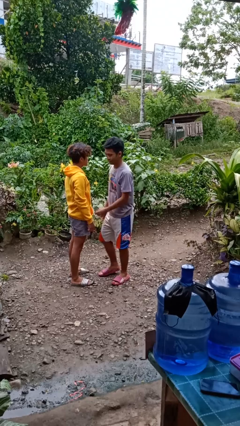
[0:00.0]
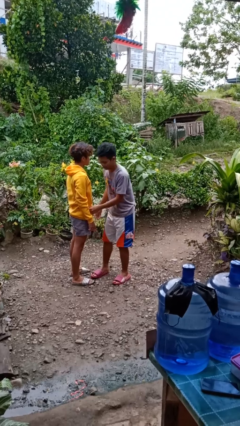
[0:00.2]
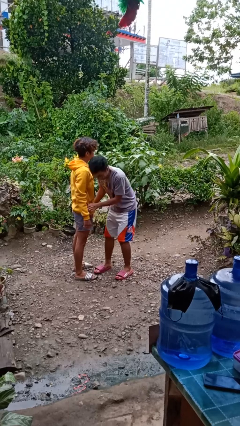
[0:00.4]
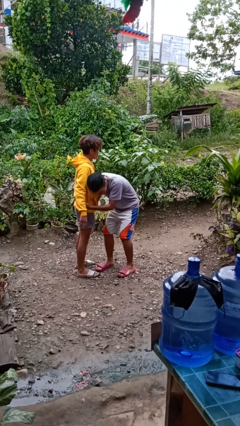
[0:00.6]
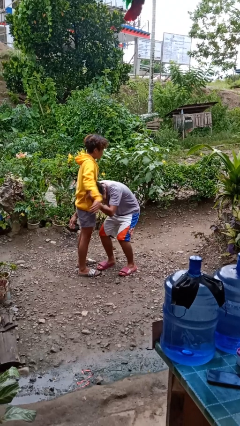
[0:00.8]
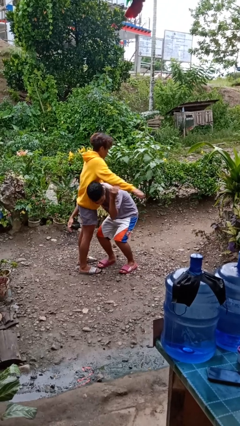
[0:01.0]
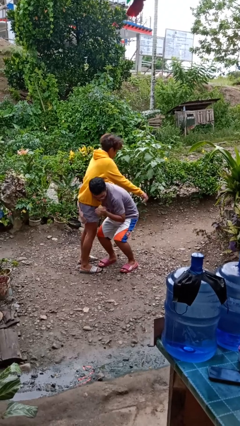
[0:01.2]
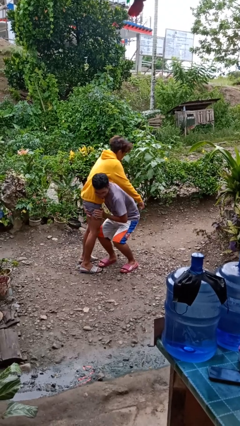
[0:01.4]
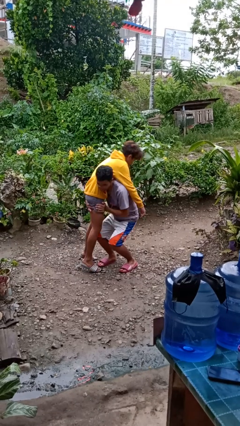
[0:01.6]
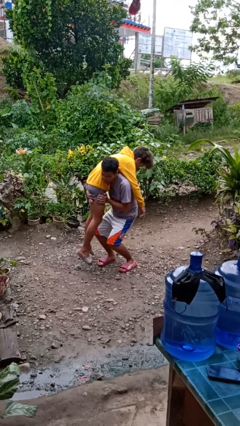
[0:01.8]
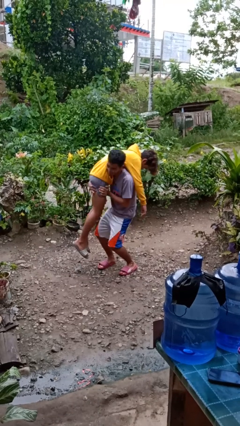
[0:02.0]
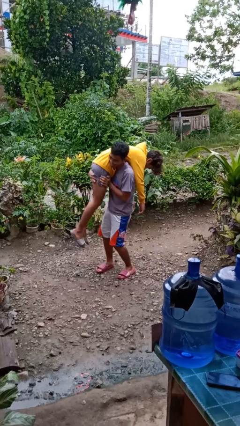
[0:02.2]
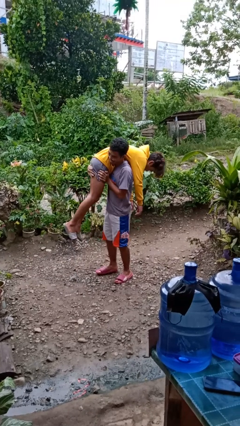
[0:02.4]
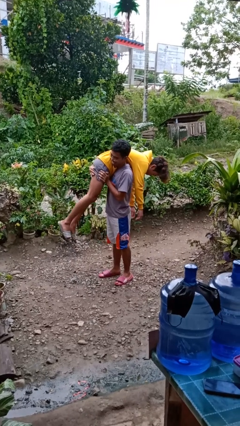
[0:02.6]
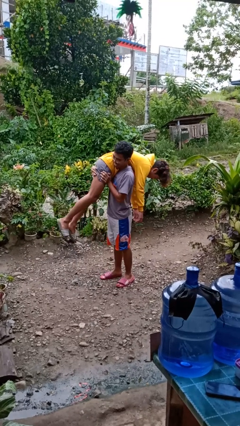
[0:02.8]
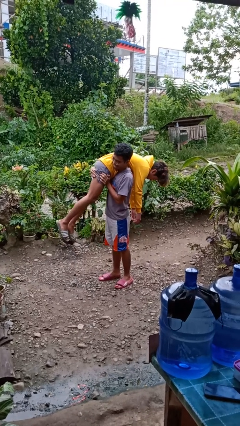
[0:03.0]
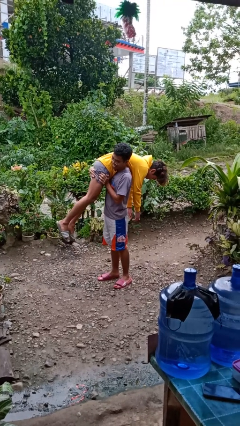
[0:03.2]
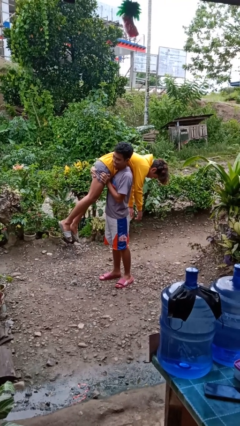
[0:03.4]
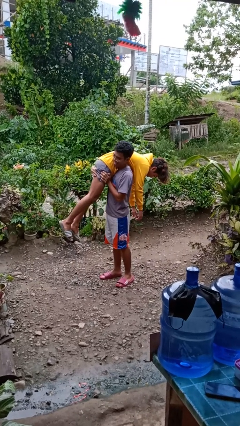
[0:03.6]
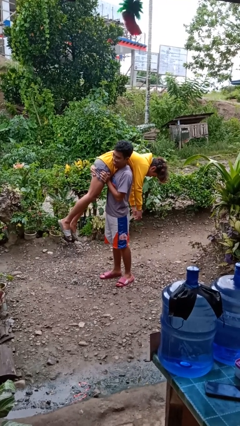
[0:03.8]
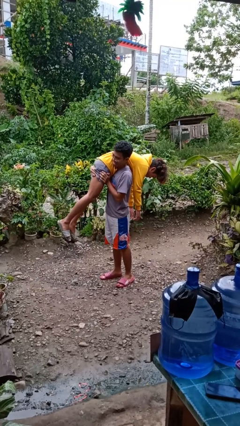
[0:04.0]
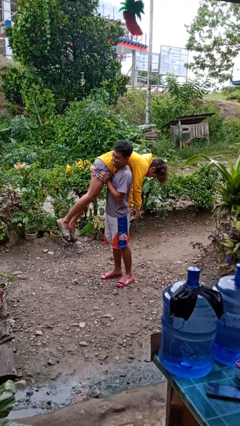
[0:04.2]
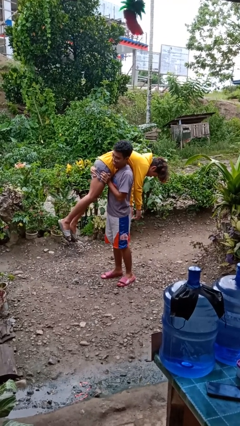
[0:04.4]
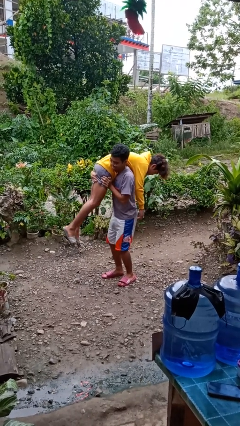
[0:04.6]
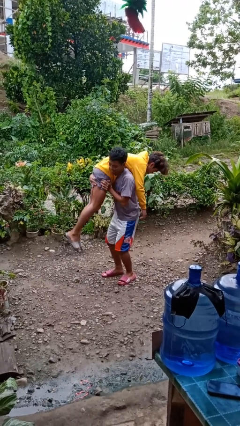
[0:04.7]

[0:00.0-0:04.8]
person carries person over shoulder

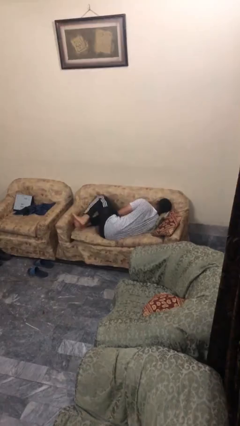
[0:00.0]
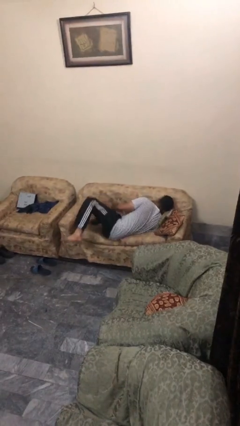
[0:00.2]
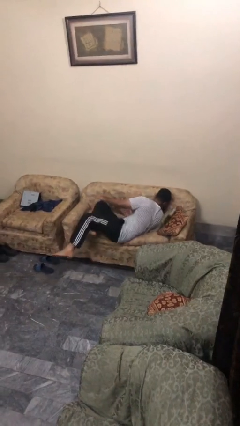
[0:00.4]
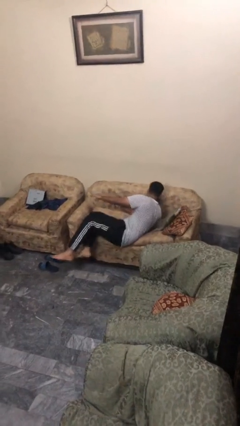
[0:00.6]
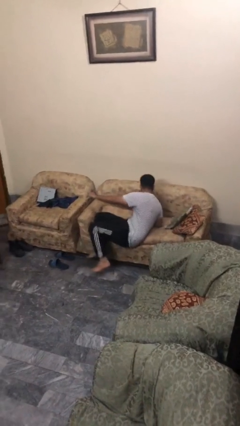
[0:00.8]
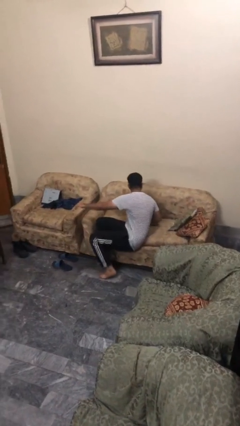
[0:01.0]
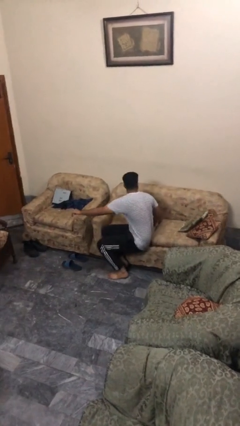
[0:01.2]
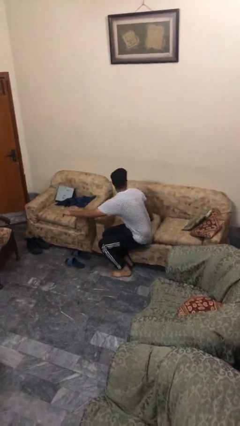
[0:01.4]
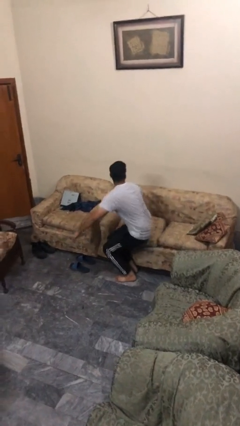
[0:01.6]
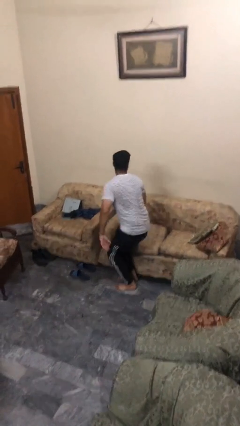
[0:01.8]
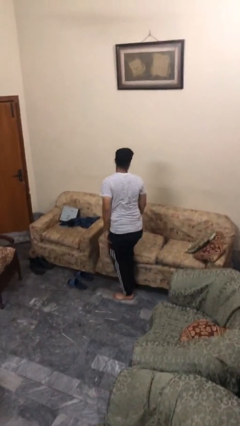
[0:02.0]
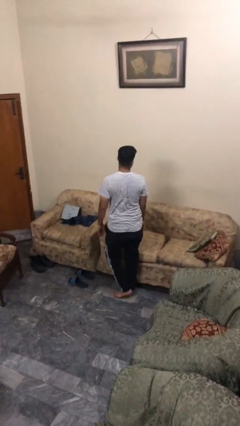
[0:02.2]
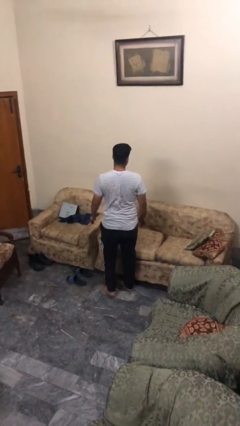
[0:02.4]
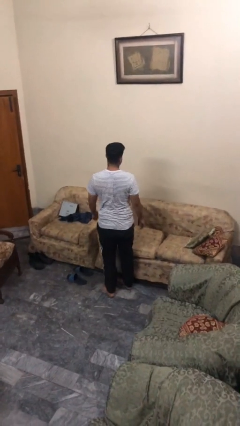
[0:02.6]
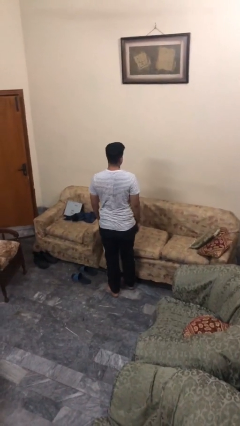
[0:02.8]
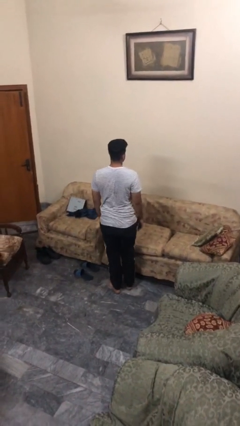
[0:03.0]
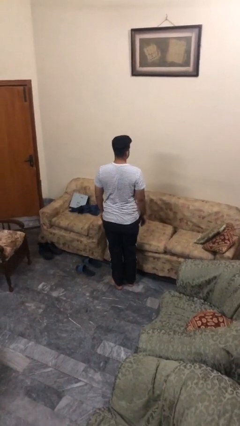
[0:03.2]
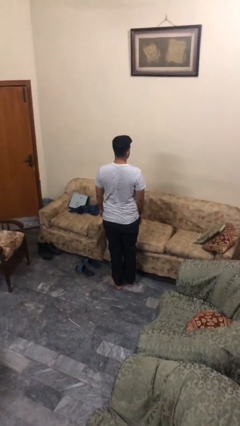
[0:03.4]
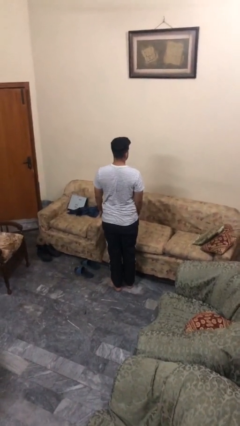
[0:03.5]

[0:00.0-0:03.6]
person stands up

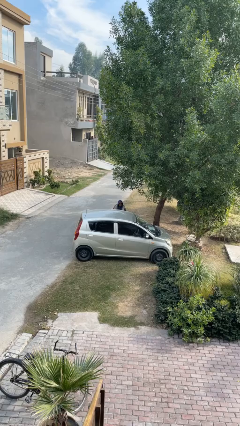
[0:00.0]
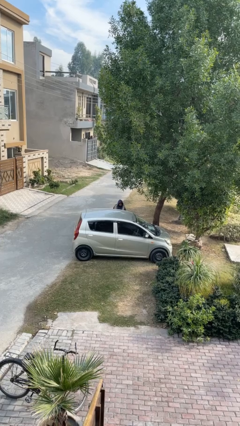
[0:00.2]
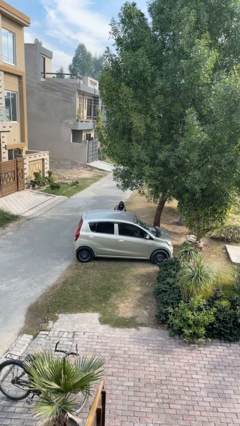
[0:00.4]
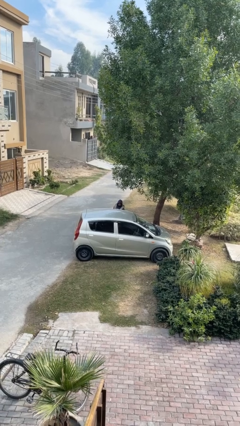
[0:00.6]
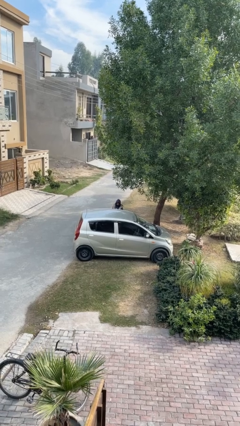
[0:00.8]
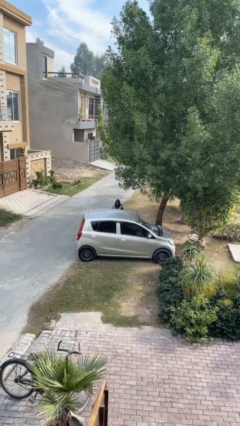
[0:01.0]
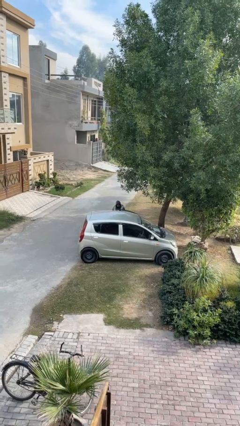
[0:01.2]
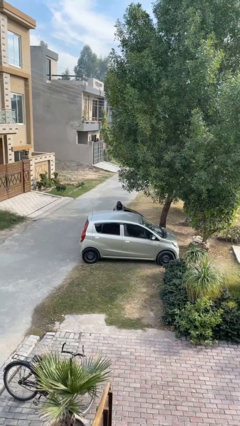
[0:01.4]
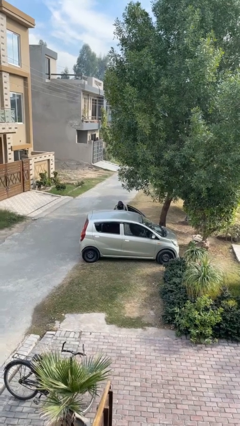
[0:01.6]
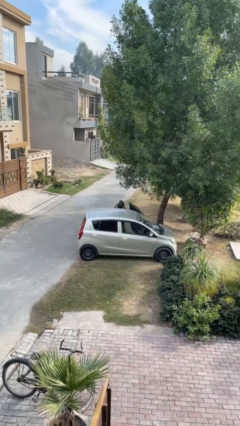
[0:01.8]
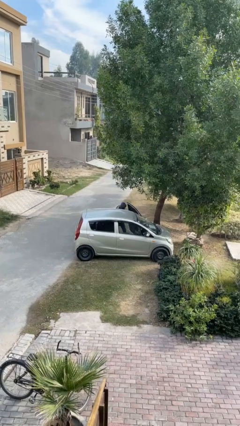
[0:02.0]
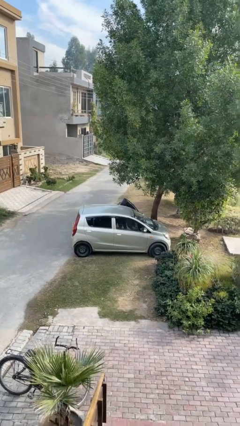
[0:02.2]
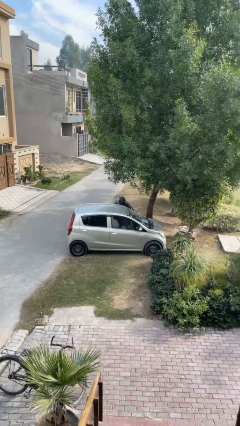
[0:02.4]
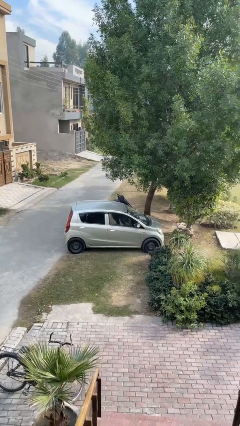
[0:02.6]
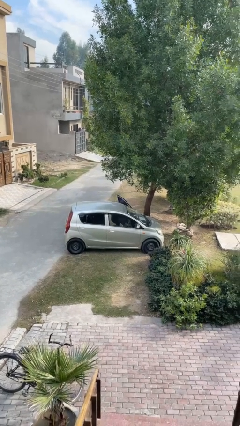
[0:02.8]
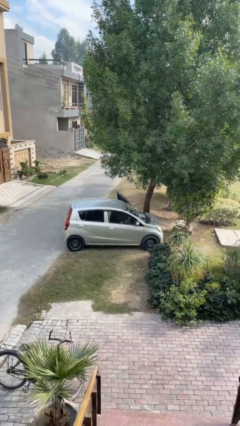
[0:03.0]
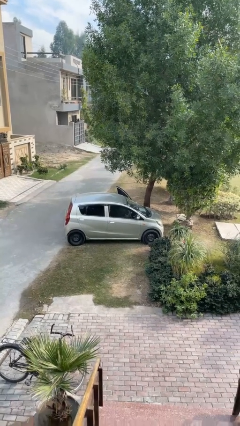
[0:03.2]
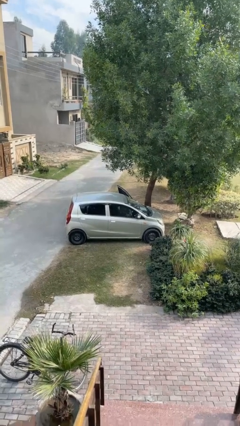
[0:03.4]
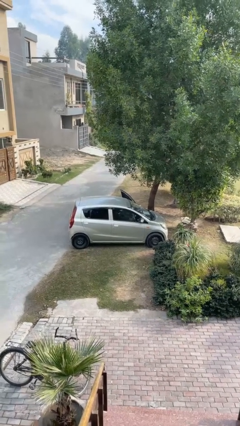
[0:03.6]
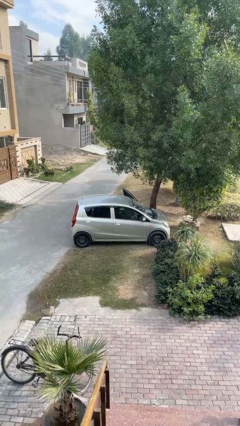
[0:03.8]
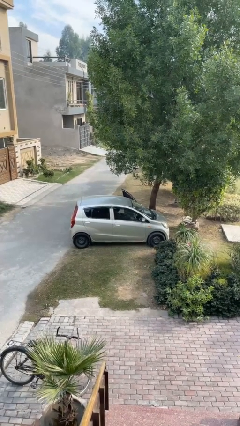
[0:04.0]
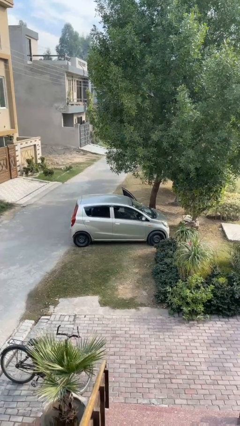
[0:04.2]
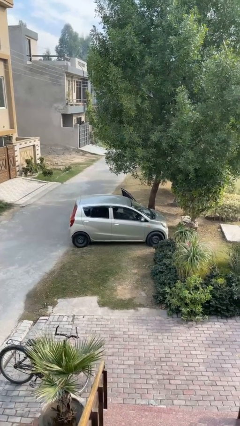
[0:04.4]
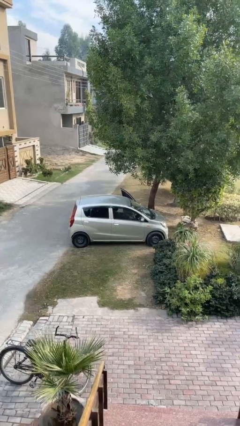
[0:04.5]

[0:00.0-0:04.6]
person enters car

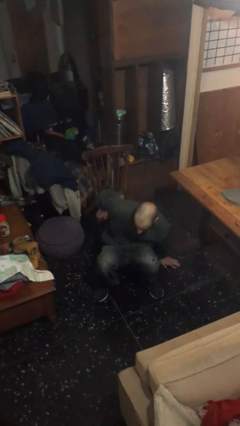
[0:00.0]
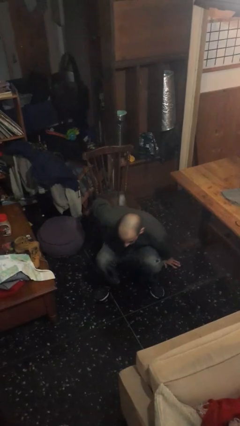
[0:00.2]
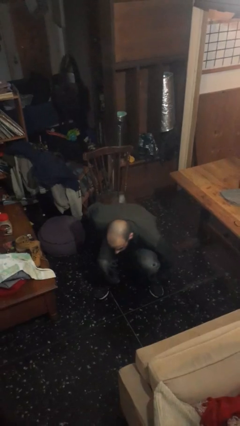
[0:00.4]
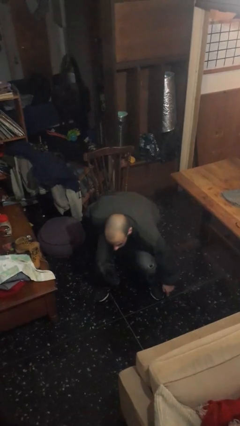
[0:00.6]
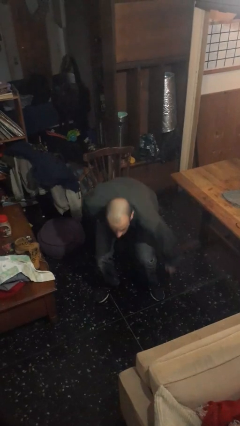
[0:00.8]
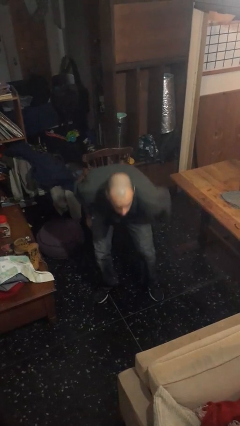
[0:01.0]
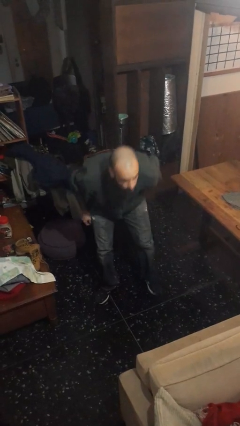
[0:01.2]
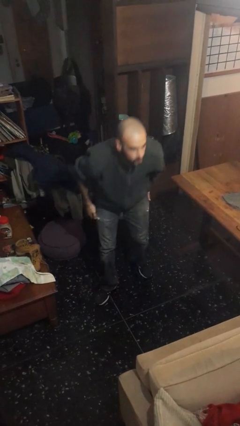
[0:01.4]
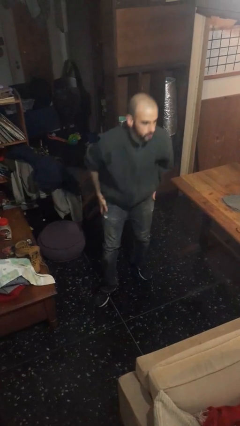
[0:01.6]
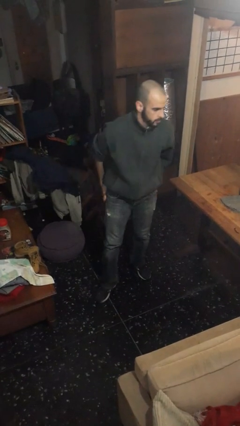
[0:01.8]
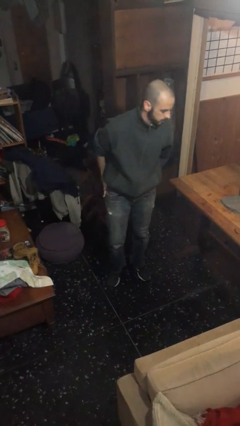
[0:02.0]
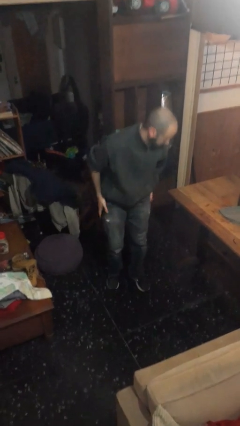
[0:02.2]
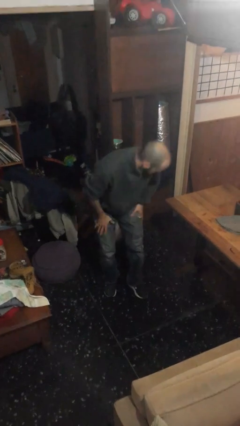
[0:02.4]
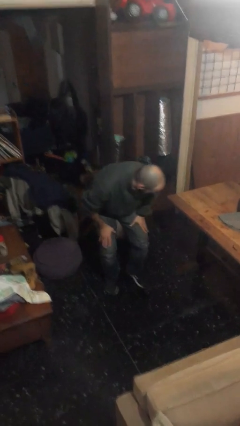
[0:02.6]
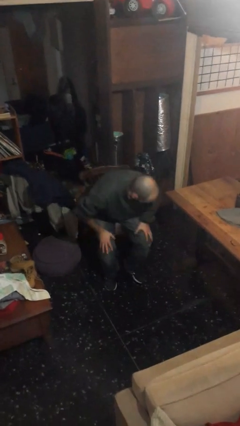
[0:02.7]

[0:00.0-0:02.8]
person stands up from floor

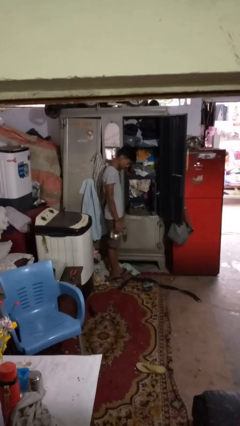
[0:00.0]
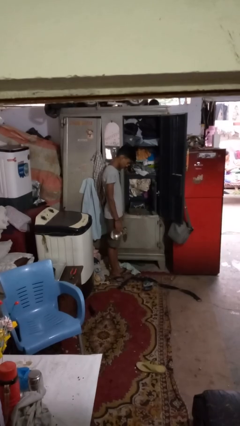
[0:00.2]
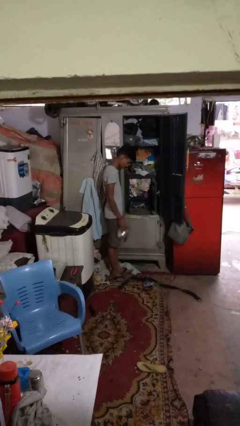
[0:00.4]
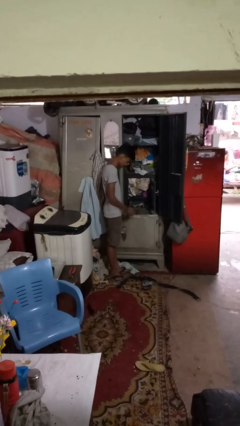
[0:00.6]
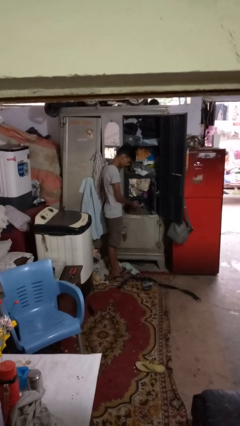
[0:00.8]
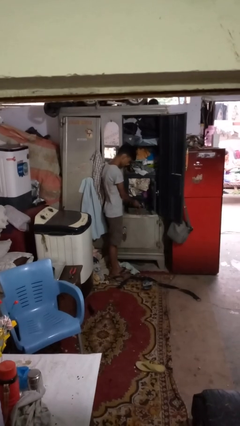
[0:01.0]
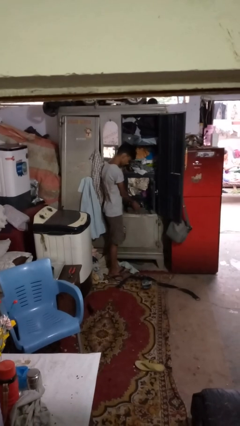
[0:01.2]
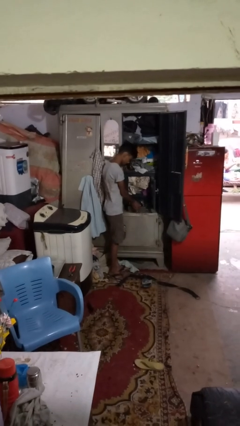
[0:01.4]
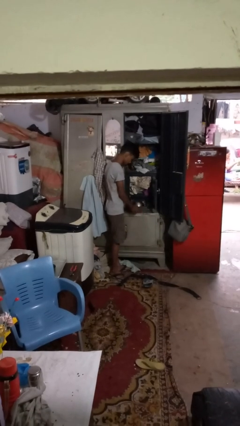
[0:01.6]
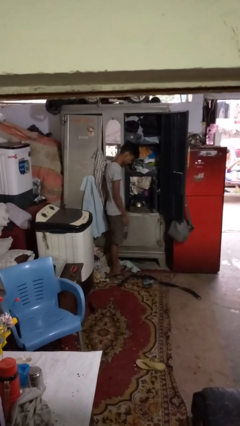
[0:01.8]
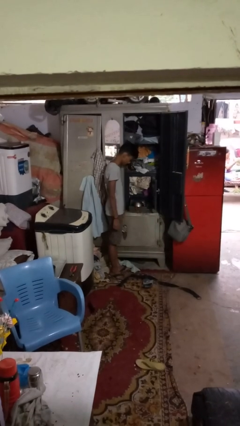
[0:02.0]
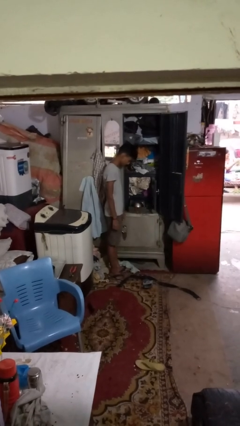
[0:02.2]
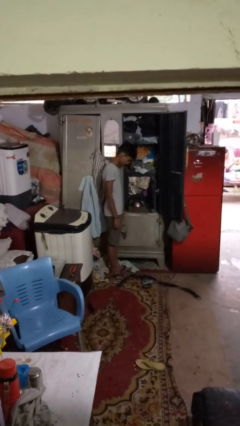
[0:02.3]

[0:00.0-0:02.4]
person puts clothes into dresser
